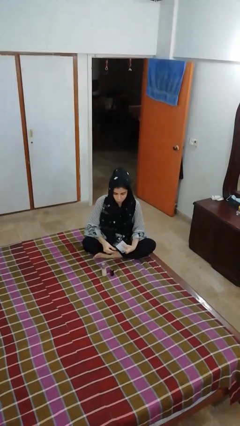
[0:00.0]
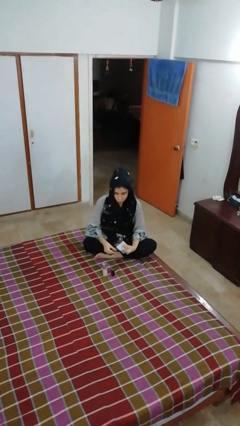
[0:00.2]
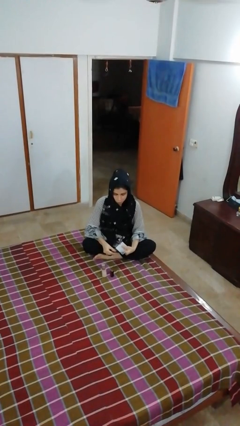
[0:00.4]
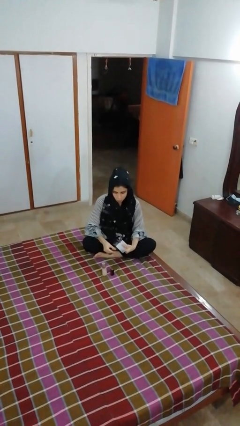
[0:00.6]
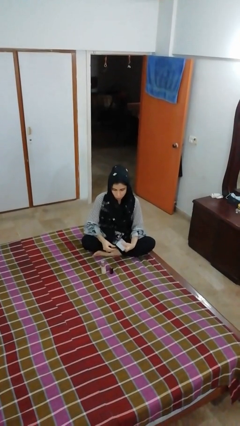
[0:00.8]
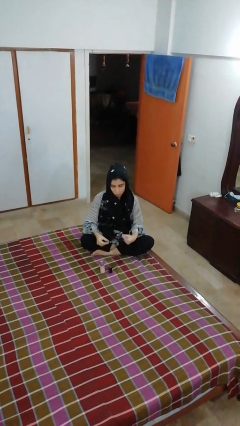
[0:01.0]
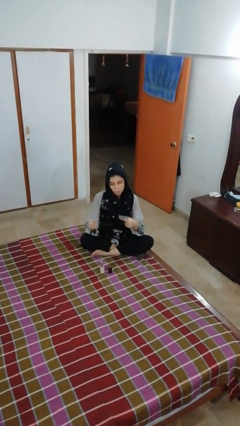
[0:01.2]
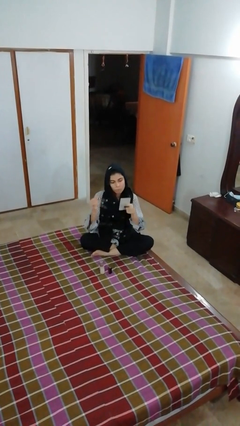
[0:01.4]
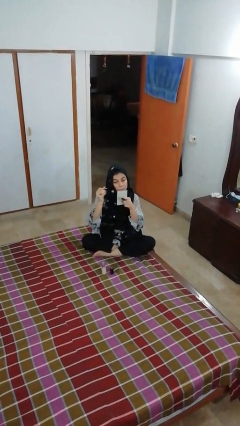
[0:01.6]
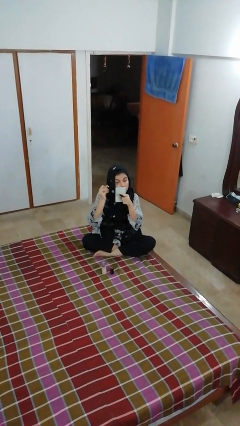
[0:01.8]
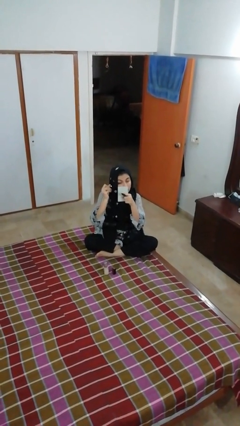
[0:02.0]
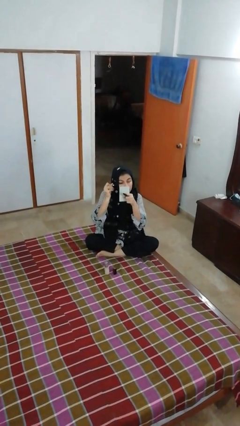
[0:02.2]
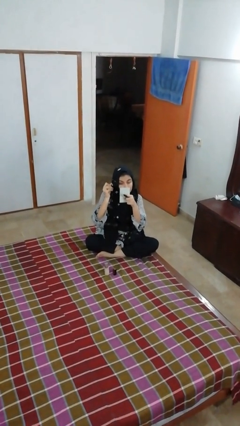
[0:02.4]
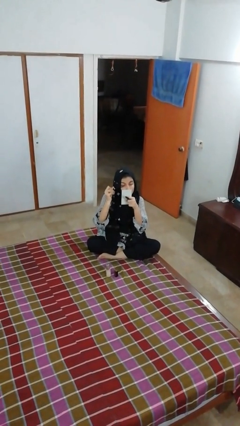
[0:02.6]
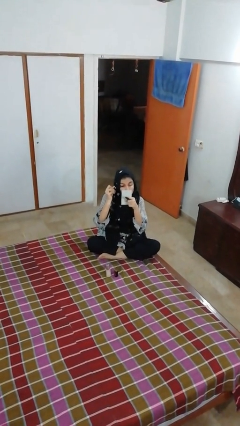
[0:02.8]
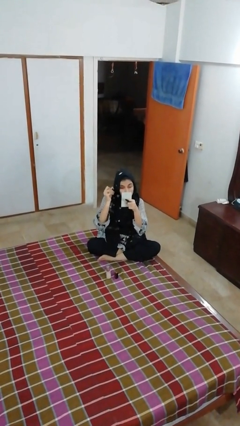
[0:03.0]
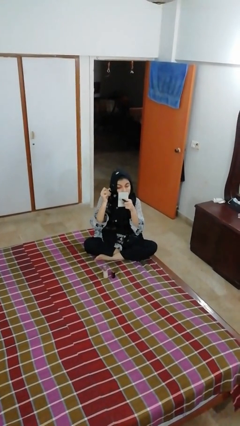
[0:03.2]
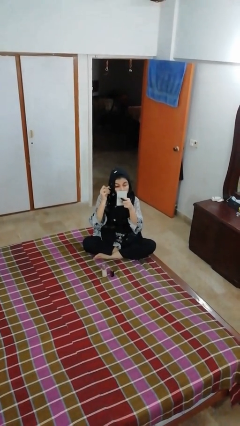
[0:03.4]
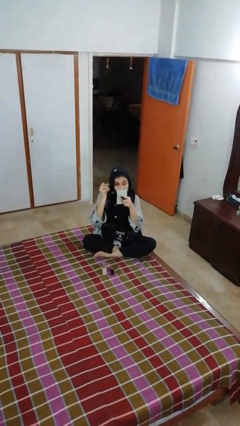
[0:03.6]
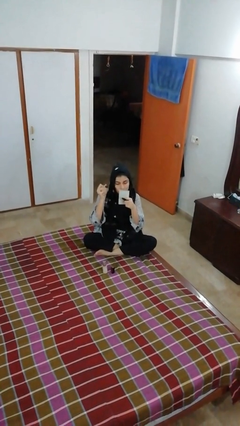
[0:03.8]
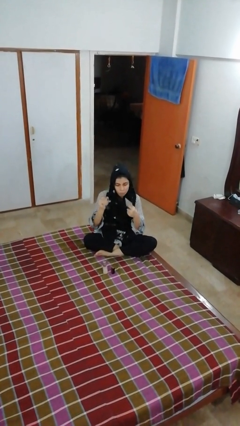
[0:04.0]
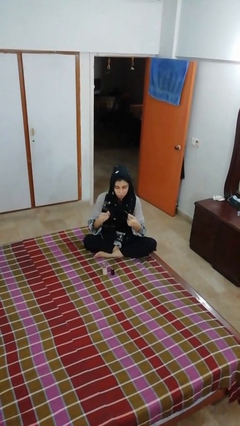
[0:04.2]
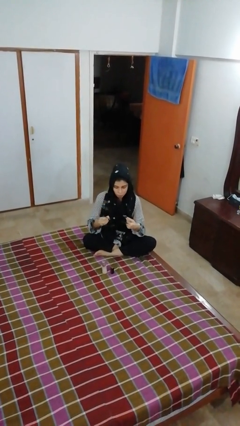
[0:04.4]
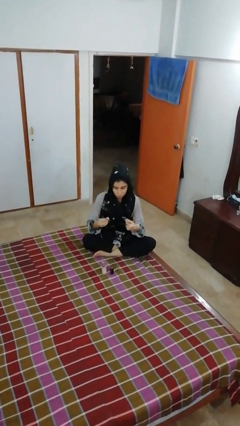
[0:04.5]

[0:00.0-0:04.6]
person applies eye makeup

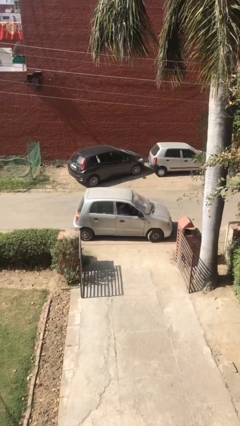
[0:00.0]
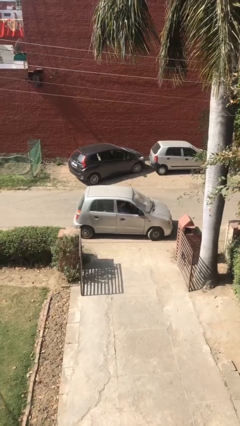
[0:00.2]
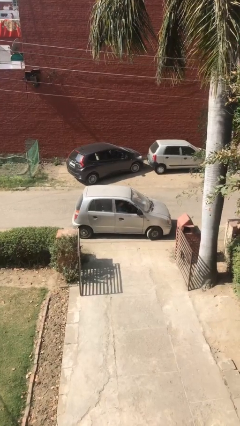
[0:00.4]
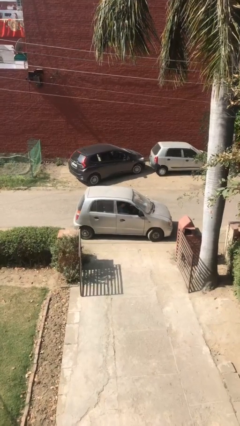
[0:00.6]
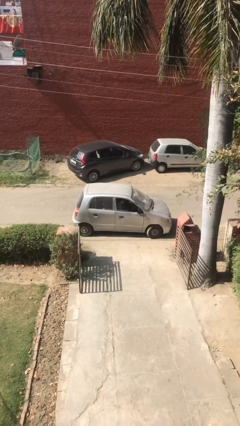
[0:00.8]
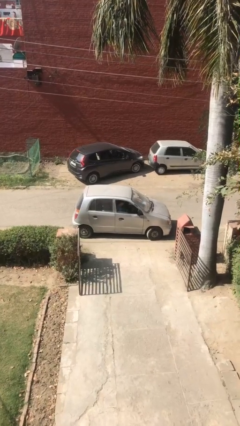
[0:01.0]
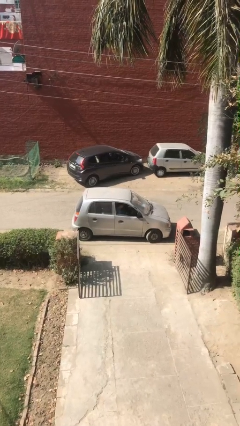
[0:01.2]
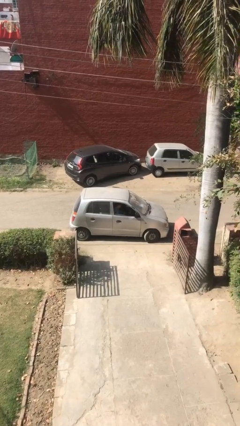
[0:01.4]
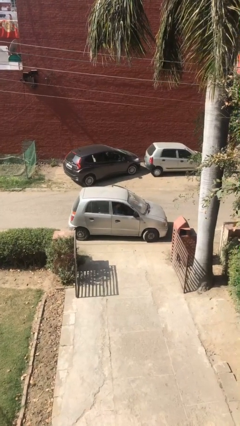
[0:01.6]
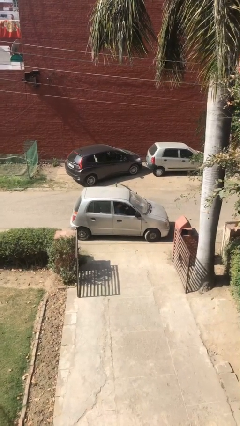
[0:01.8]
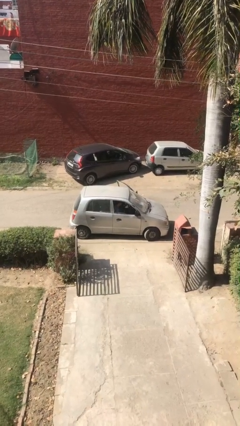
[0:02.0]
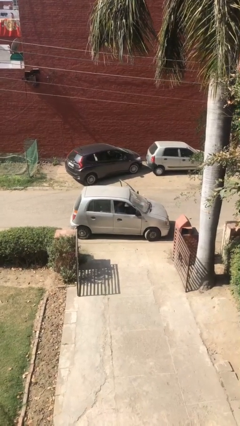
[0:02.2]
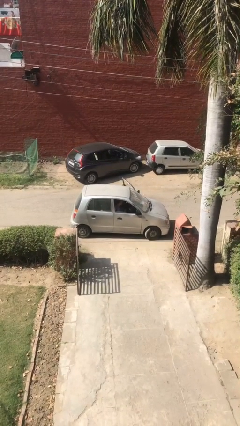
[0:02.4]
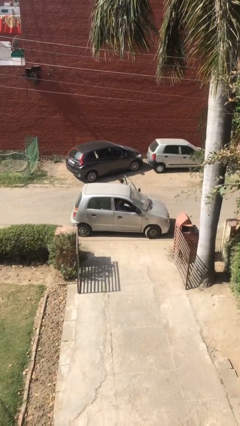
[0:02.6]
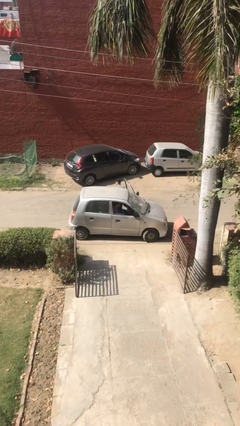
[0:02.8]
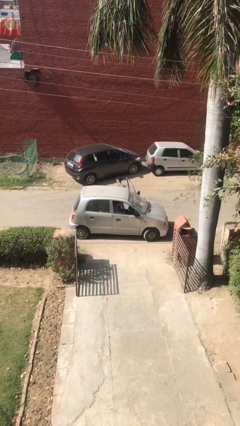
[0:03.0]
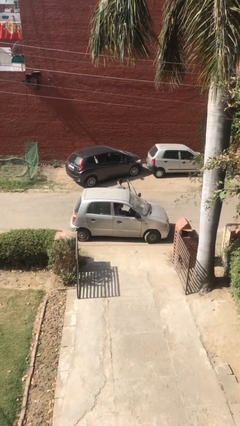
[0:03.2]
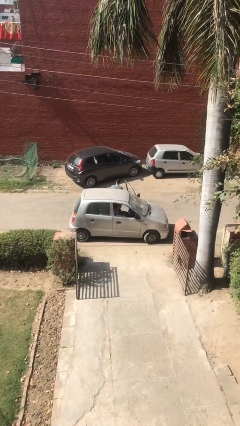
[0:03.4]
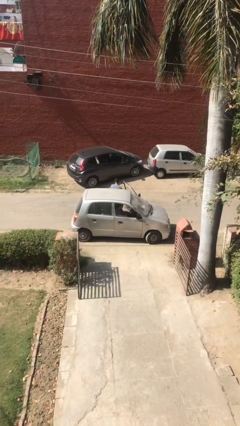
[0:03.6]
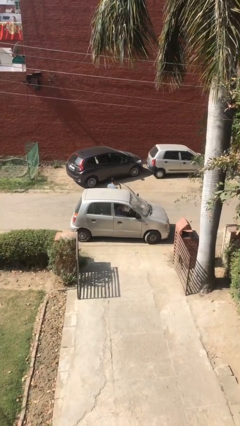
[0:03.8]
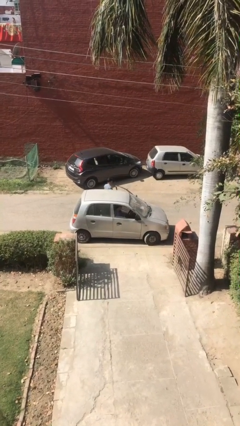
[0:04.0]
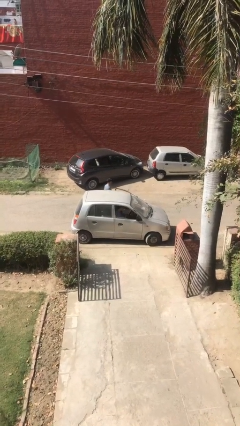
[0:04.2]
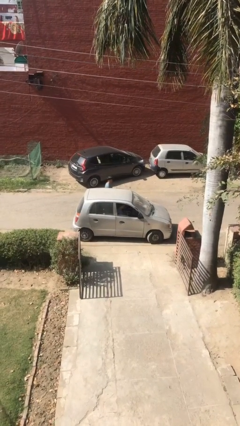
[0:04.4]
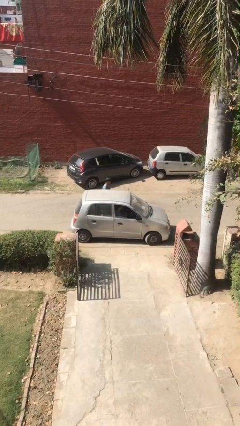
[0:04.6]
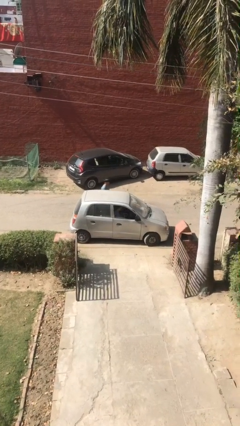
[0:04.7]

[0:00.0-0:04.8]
car drops off person

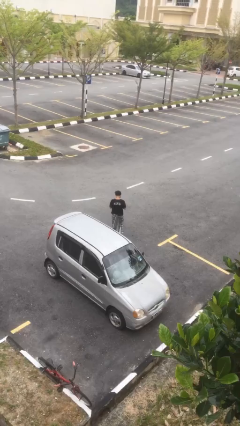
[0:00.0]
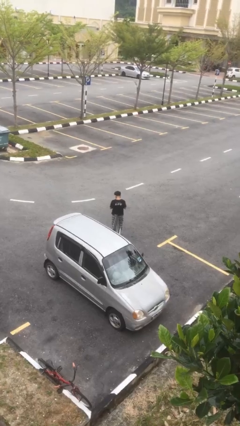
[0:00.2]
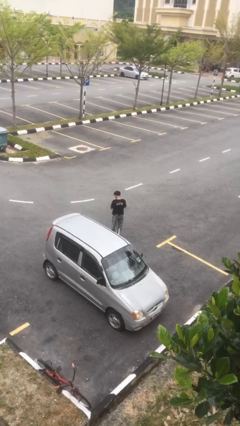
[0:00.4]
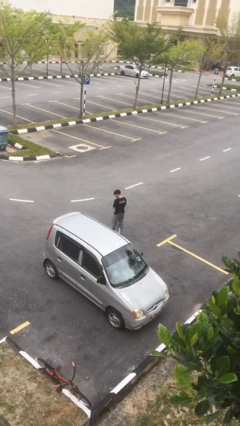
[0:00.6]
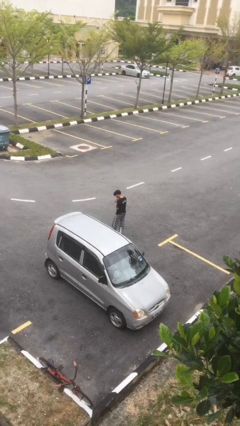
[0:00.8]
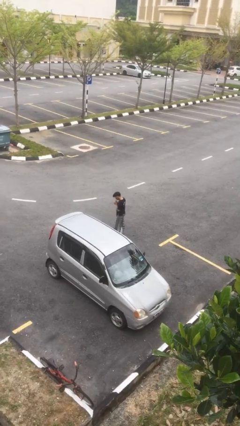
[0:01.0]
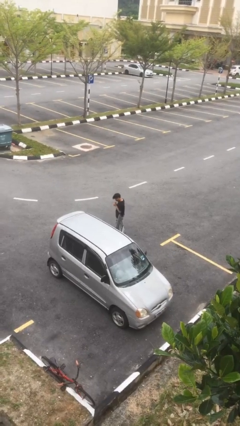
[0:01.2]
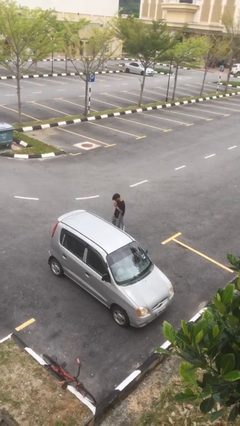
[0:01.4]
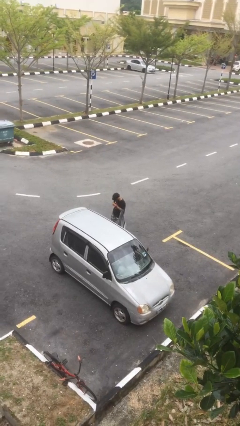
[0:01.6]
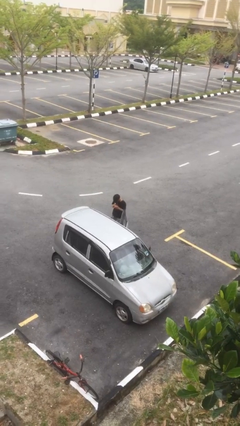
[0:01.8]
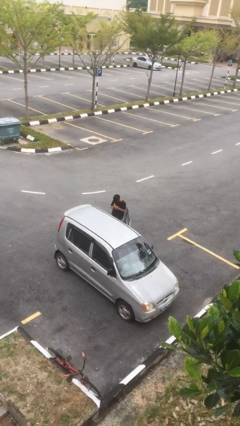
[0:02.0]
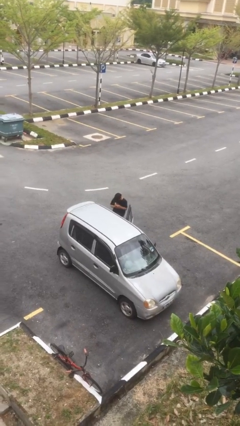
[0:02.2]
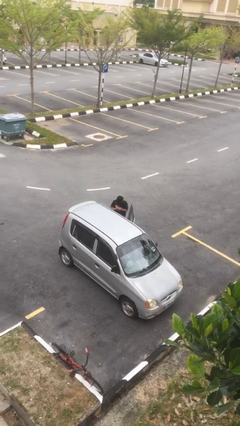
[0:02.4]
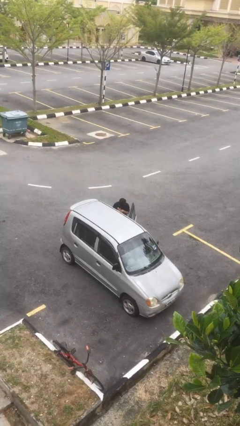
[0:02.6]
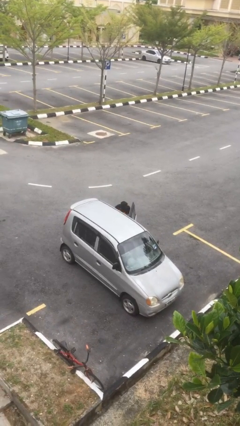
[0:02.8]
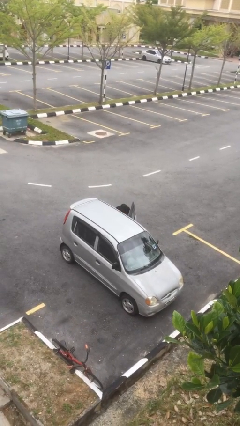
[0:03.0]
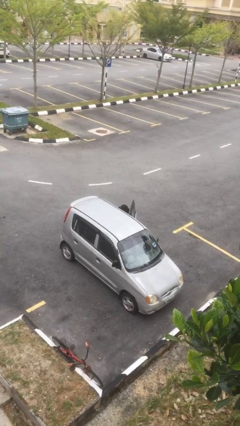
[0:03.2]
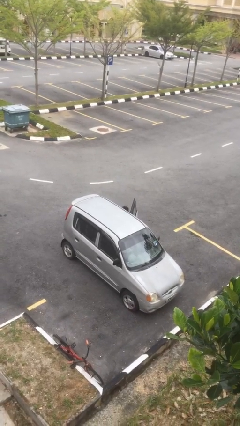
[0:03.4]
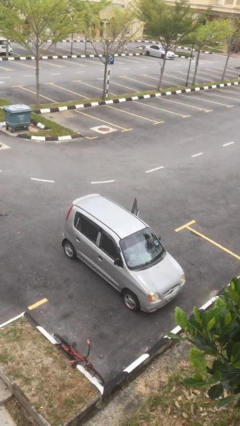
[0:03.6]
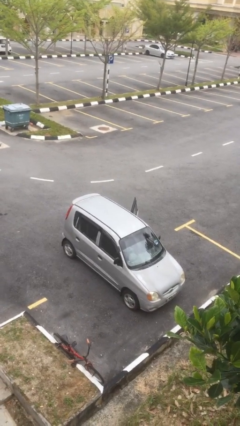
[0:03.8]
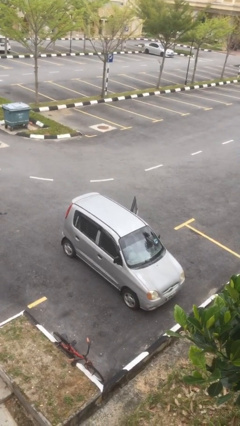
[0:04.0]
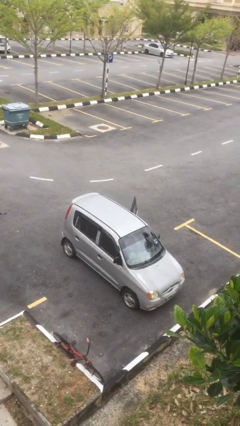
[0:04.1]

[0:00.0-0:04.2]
person enters car

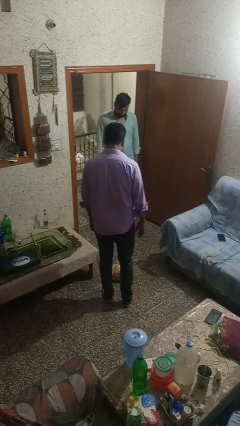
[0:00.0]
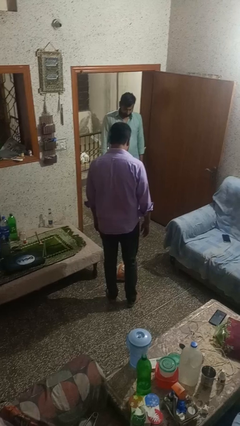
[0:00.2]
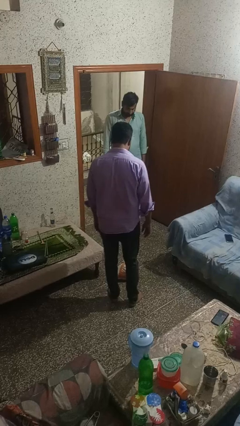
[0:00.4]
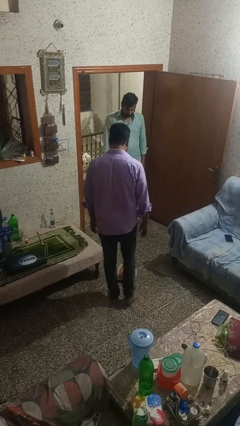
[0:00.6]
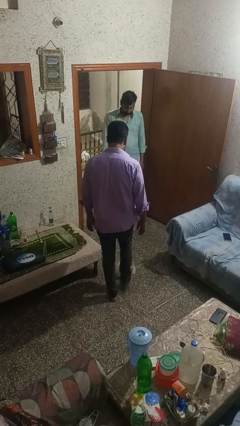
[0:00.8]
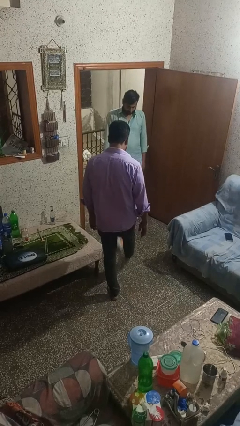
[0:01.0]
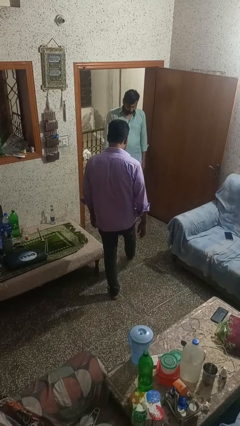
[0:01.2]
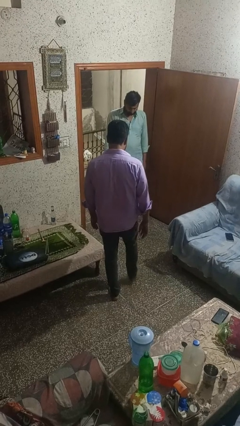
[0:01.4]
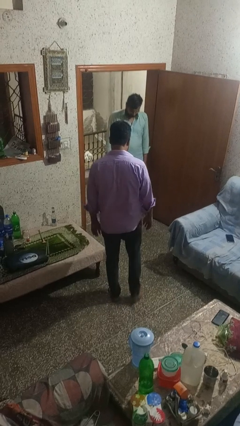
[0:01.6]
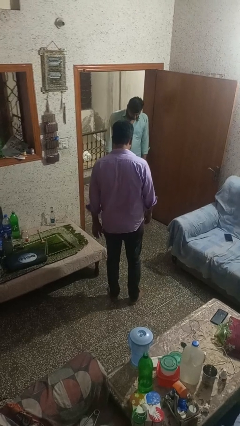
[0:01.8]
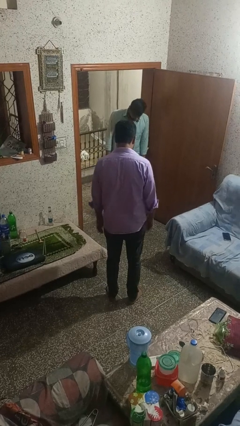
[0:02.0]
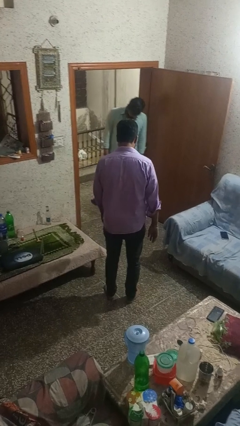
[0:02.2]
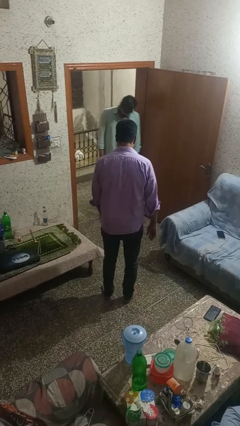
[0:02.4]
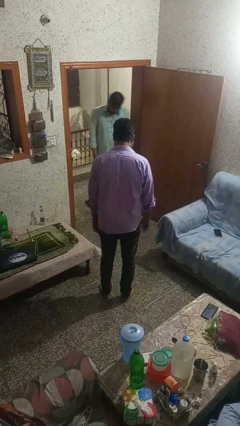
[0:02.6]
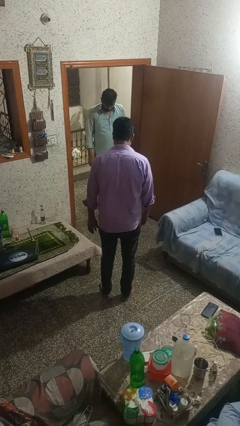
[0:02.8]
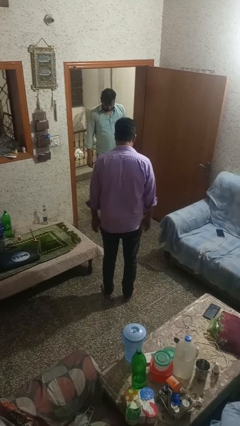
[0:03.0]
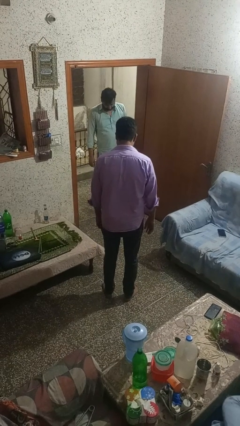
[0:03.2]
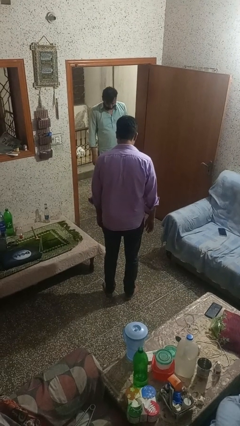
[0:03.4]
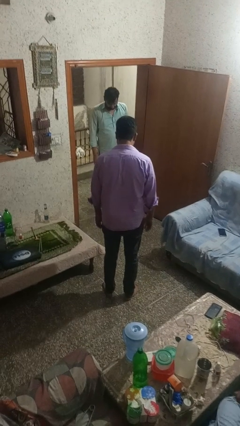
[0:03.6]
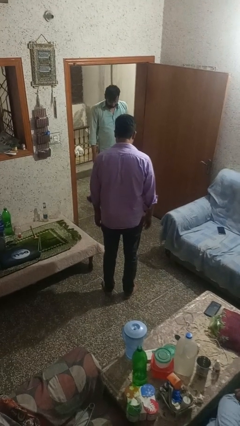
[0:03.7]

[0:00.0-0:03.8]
person kicks object to person

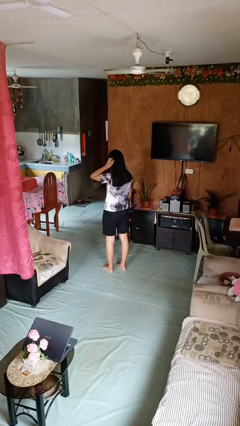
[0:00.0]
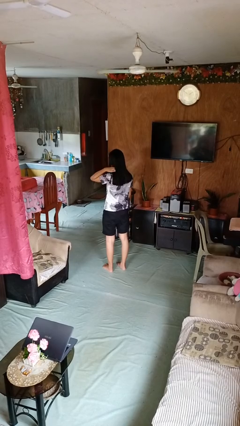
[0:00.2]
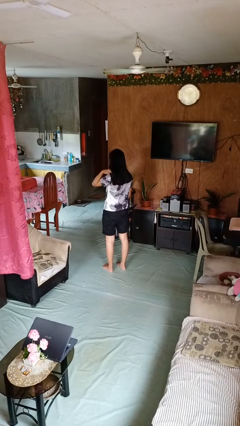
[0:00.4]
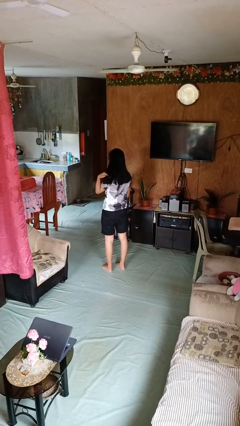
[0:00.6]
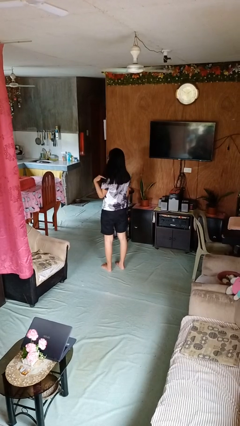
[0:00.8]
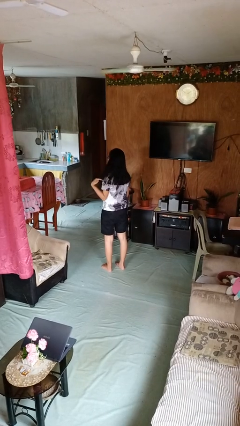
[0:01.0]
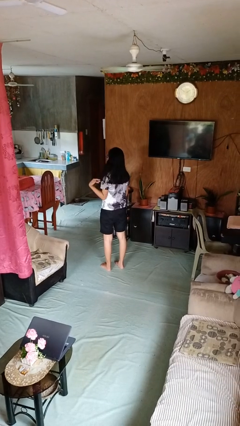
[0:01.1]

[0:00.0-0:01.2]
person strokes hair
